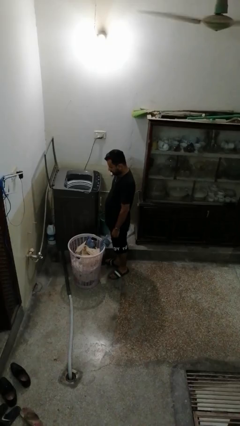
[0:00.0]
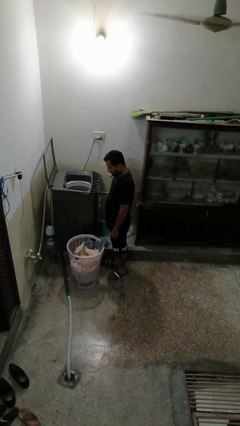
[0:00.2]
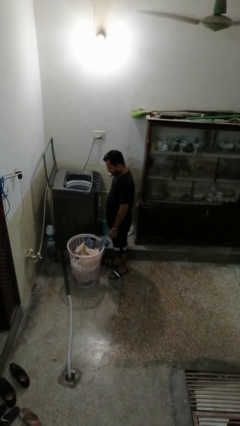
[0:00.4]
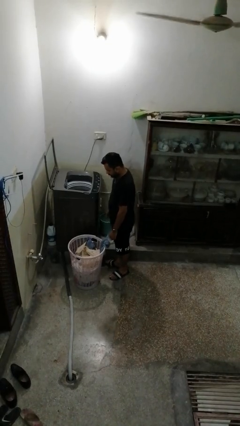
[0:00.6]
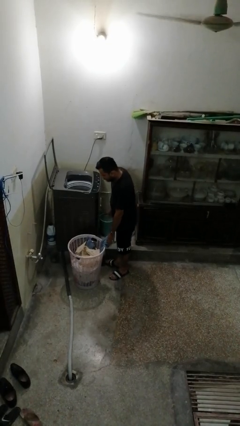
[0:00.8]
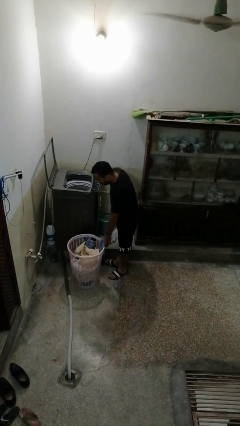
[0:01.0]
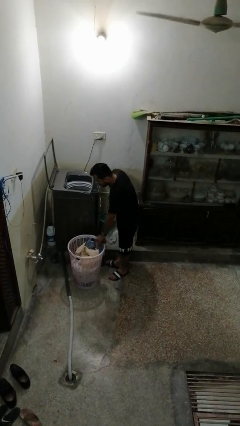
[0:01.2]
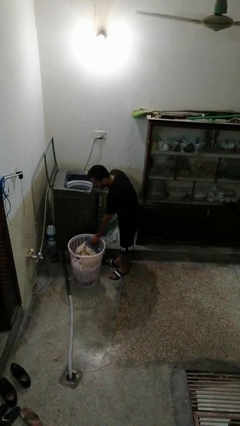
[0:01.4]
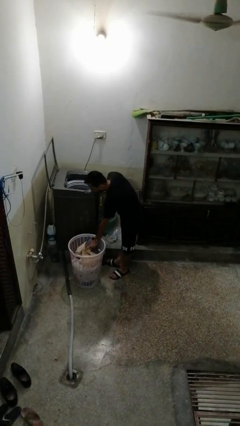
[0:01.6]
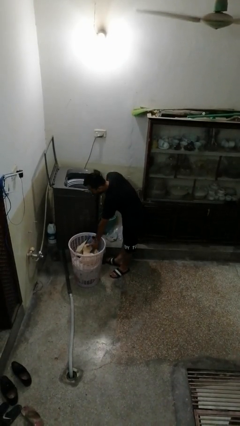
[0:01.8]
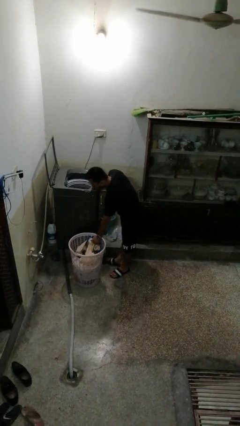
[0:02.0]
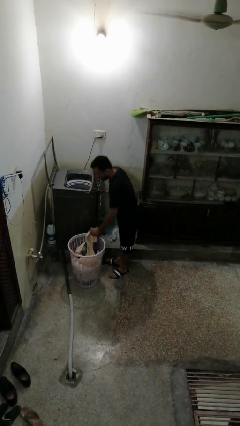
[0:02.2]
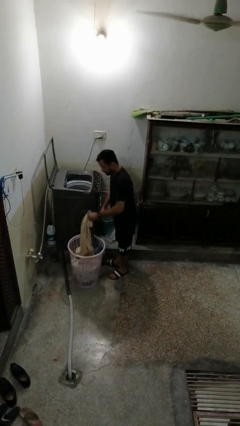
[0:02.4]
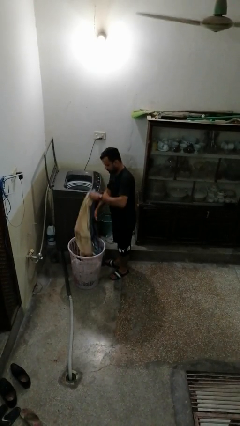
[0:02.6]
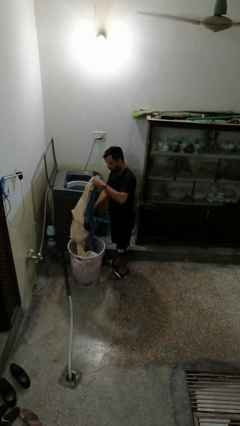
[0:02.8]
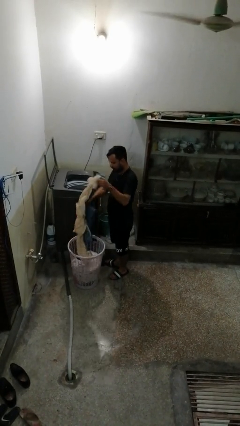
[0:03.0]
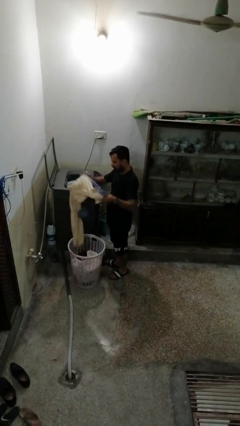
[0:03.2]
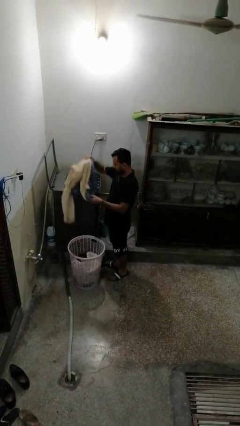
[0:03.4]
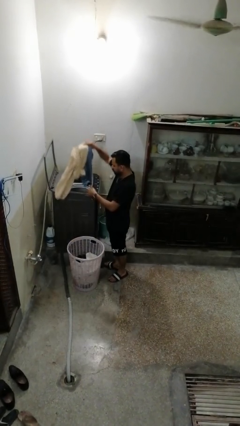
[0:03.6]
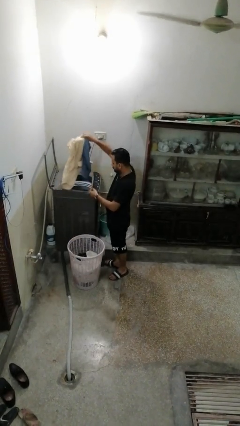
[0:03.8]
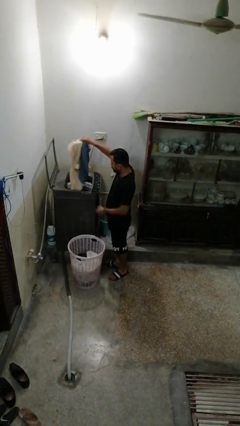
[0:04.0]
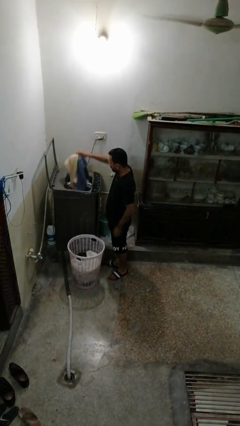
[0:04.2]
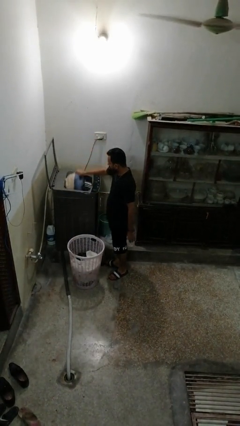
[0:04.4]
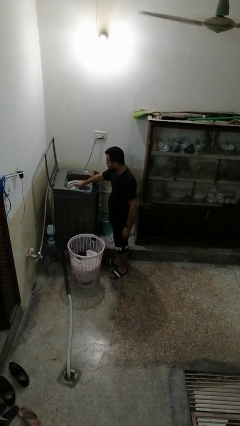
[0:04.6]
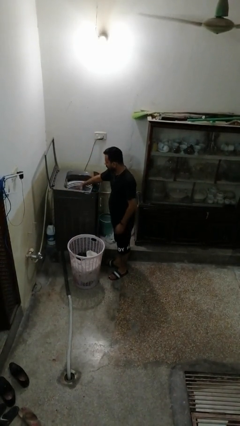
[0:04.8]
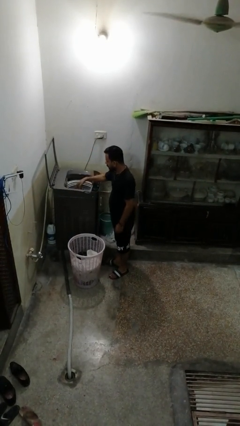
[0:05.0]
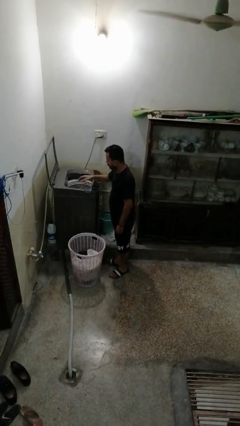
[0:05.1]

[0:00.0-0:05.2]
person loads dryer

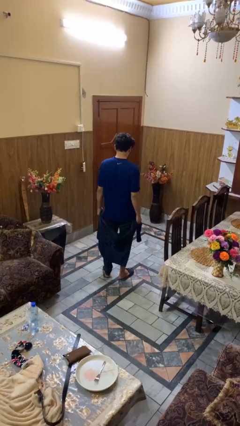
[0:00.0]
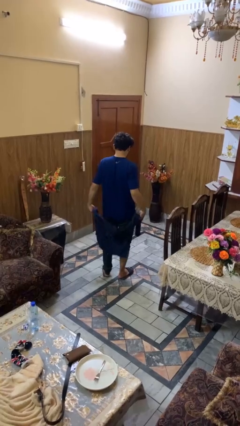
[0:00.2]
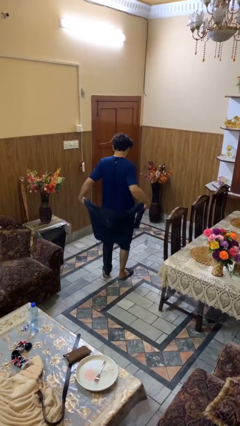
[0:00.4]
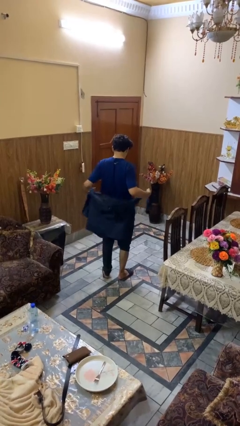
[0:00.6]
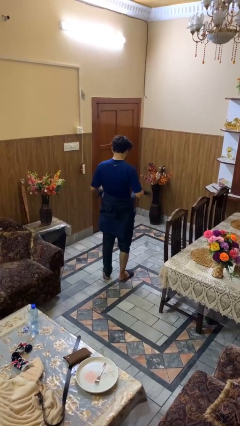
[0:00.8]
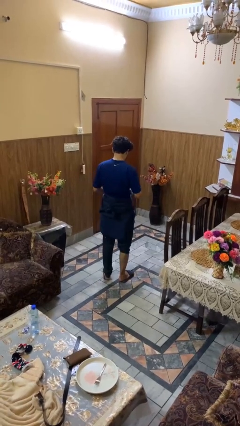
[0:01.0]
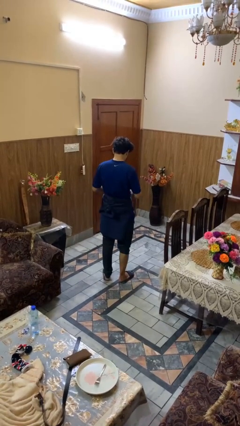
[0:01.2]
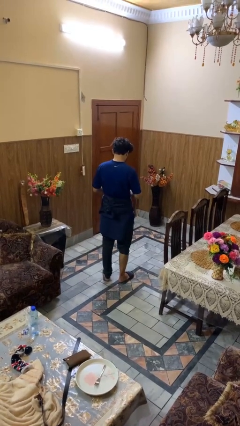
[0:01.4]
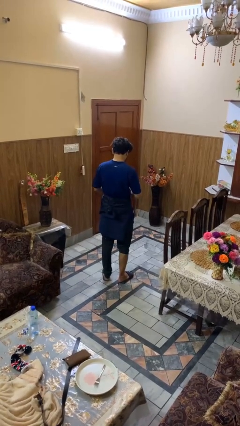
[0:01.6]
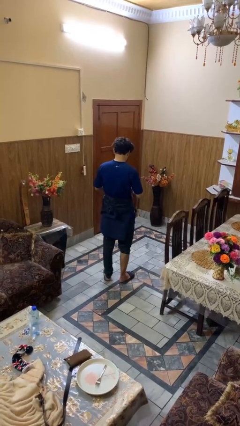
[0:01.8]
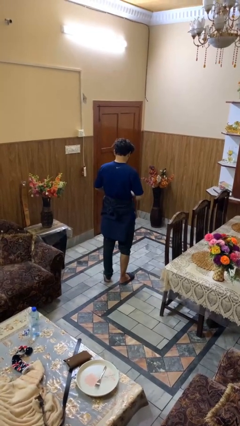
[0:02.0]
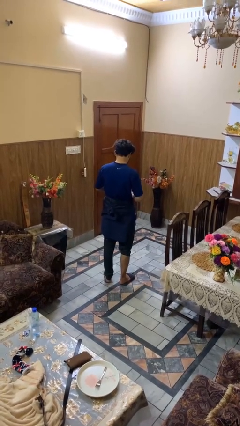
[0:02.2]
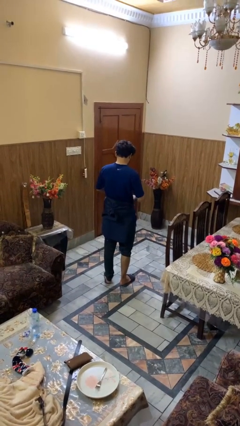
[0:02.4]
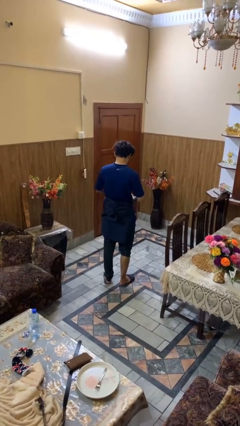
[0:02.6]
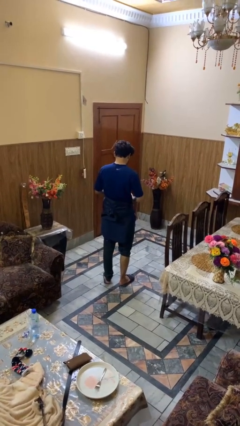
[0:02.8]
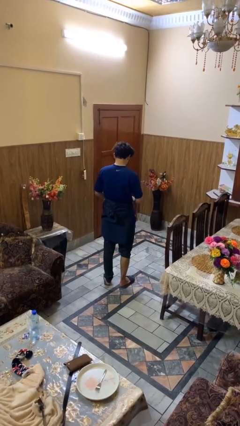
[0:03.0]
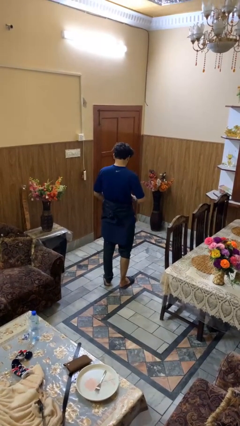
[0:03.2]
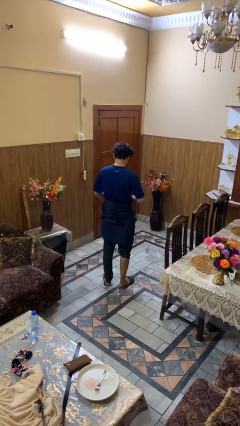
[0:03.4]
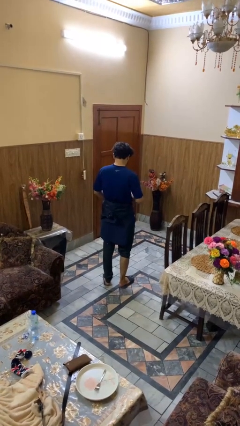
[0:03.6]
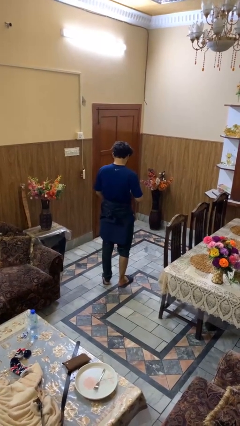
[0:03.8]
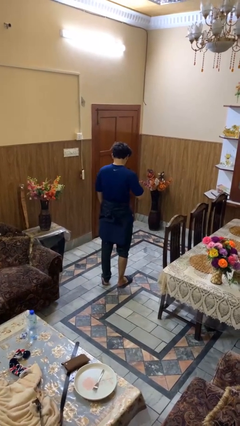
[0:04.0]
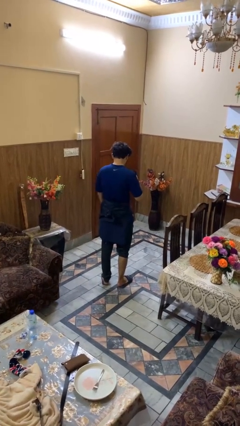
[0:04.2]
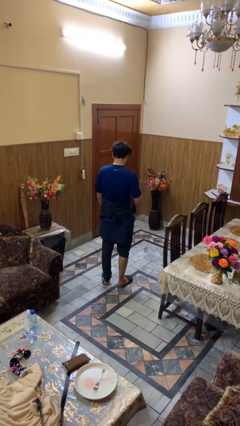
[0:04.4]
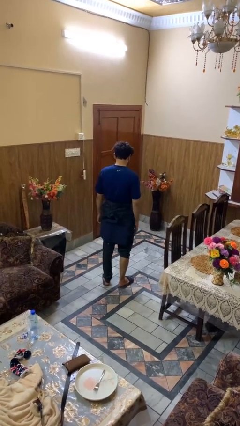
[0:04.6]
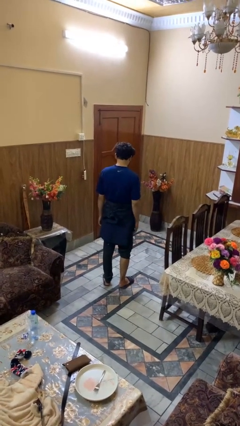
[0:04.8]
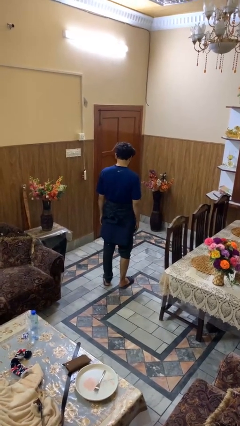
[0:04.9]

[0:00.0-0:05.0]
person ties jacket around waist

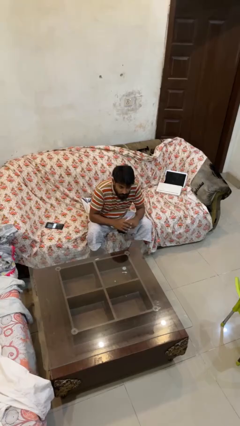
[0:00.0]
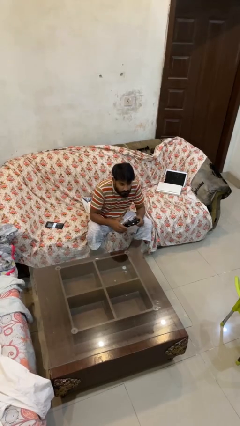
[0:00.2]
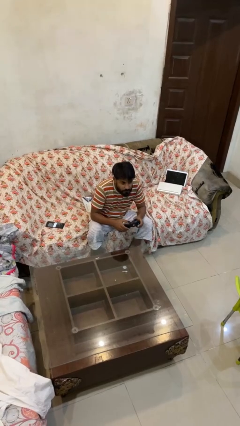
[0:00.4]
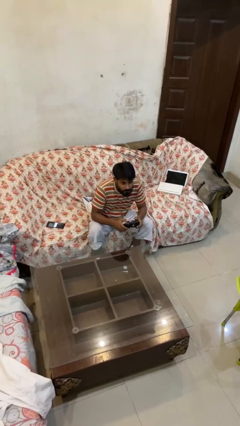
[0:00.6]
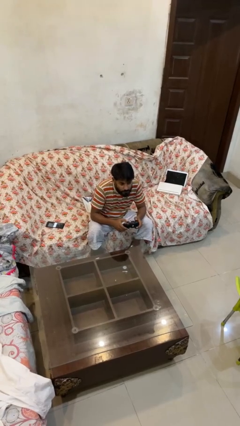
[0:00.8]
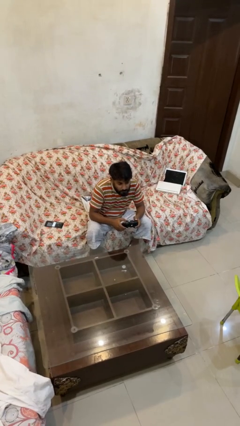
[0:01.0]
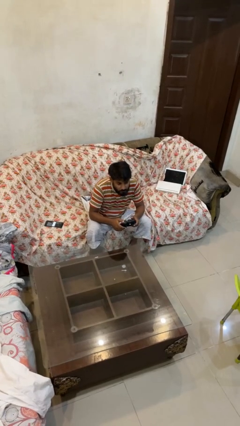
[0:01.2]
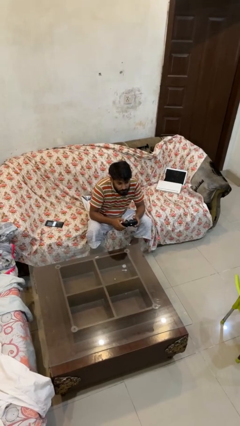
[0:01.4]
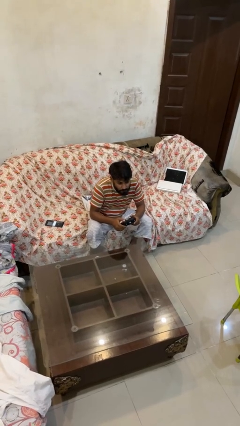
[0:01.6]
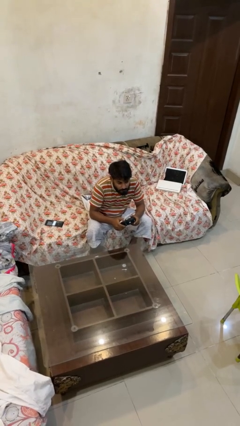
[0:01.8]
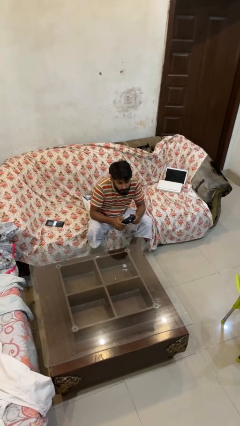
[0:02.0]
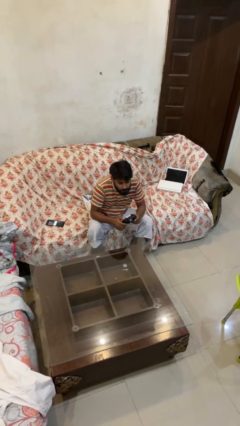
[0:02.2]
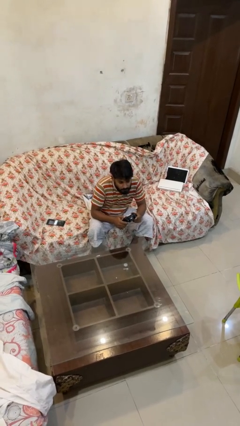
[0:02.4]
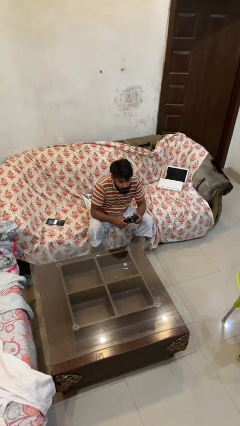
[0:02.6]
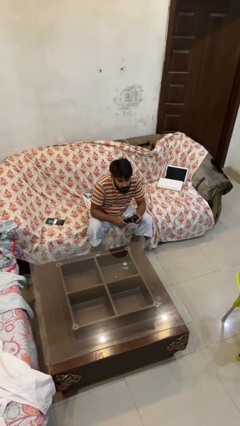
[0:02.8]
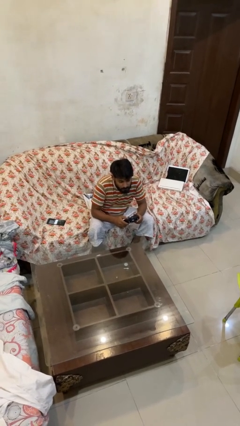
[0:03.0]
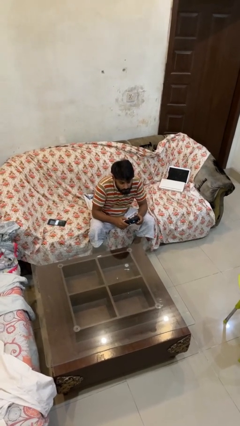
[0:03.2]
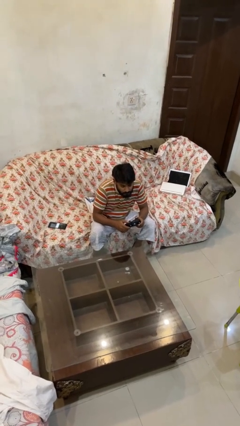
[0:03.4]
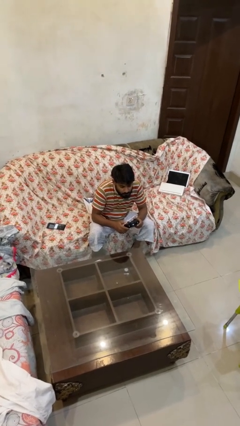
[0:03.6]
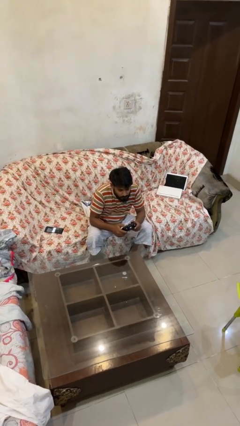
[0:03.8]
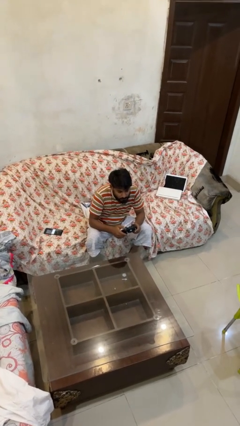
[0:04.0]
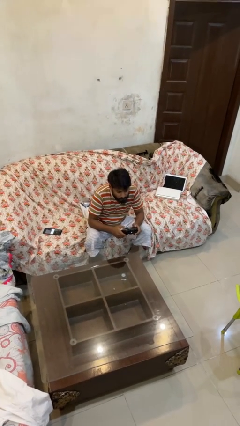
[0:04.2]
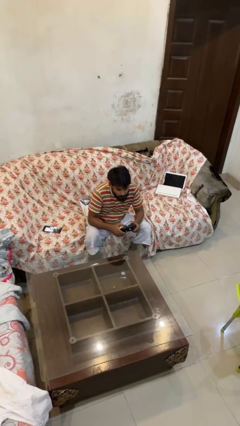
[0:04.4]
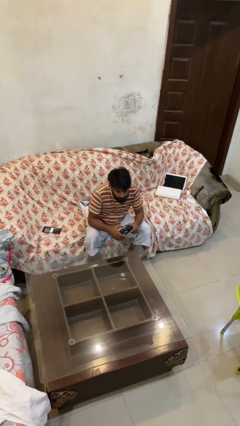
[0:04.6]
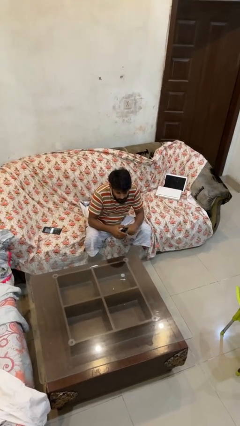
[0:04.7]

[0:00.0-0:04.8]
person interacts with handheld game

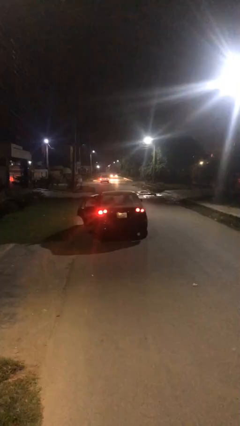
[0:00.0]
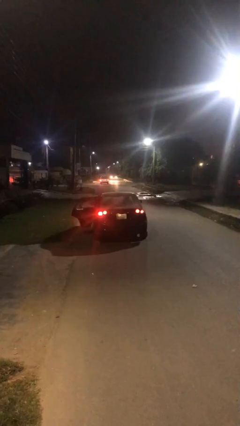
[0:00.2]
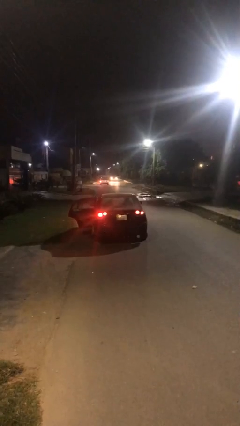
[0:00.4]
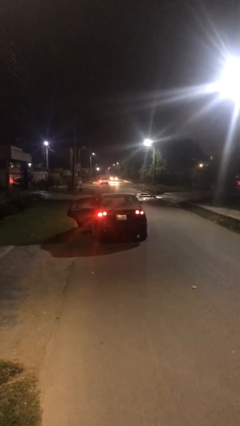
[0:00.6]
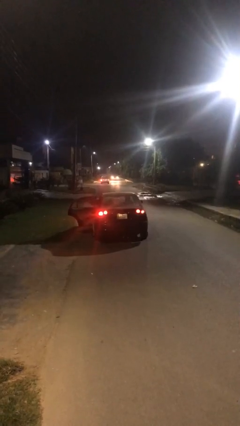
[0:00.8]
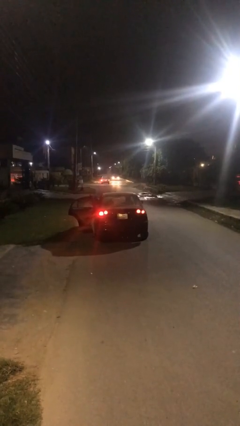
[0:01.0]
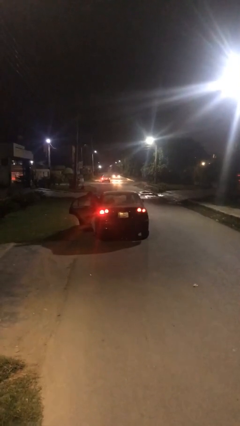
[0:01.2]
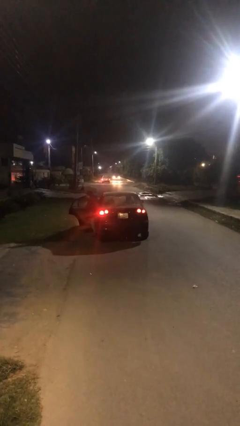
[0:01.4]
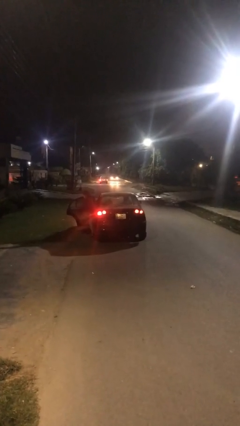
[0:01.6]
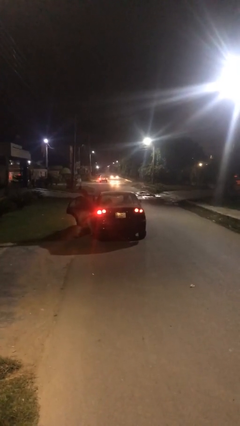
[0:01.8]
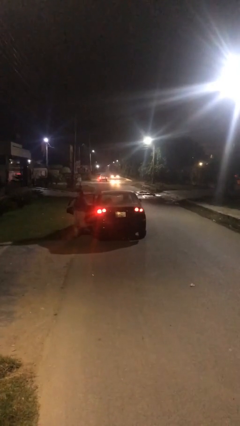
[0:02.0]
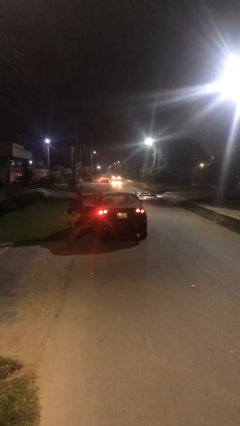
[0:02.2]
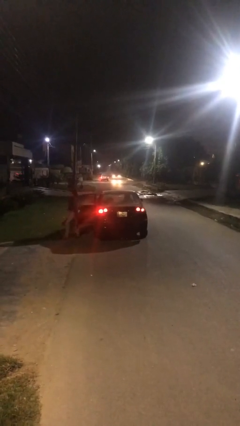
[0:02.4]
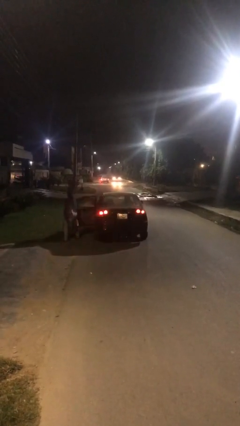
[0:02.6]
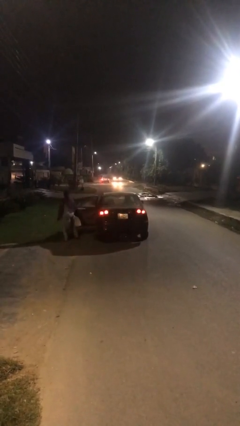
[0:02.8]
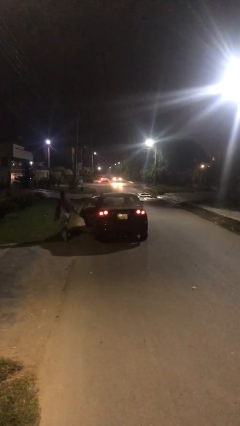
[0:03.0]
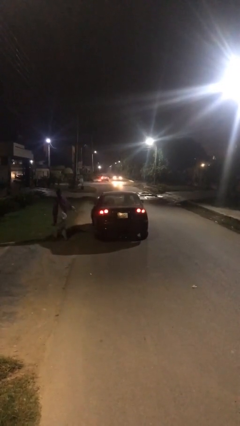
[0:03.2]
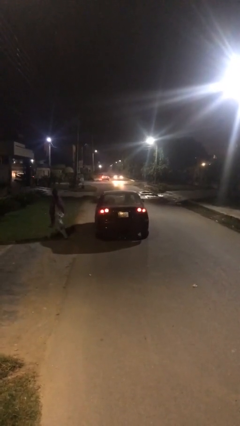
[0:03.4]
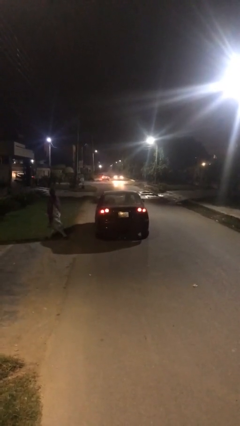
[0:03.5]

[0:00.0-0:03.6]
car drops off person
